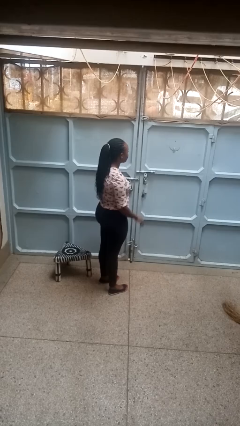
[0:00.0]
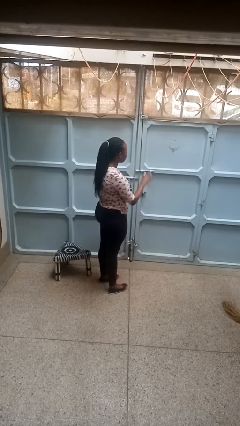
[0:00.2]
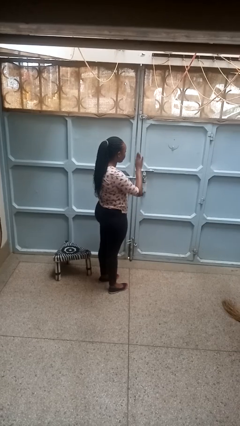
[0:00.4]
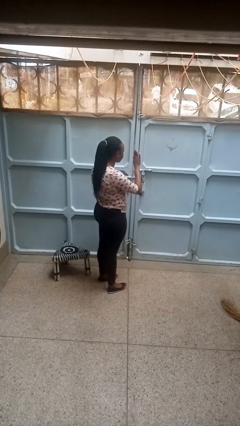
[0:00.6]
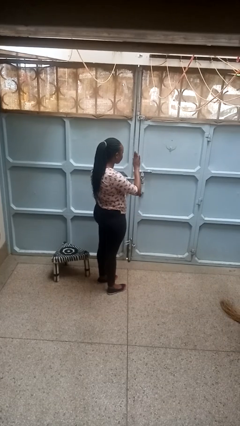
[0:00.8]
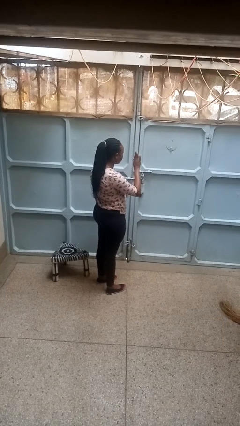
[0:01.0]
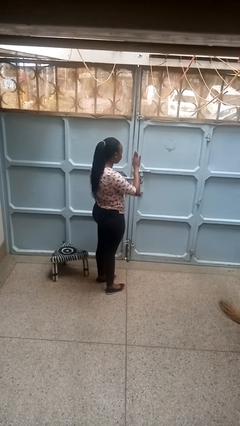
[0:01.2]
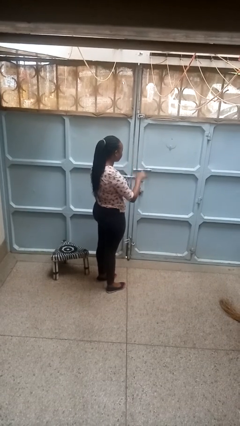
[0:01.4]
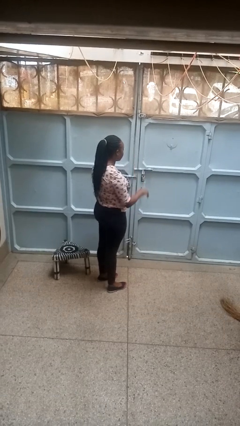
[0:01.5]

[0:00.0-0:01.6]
person gestures stop

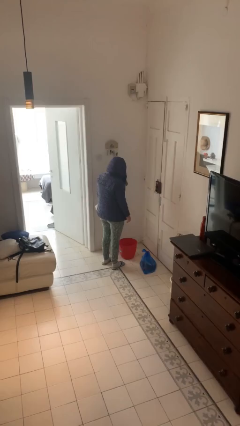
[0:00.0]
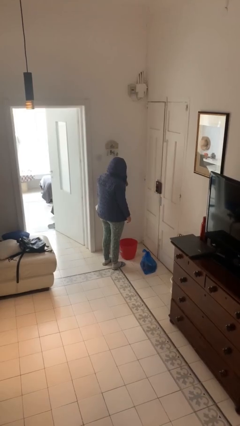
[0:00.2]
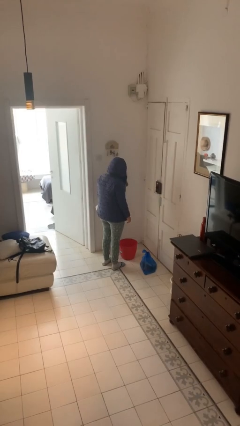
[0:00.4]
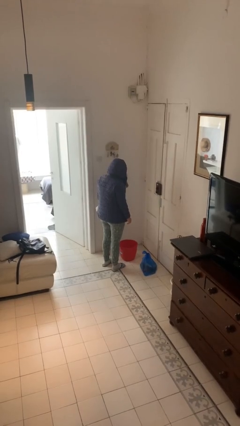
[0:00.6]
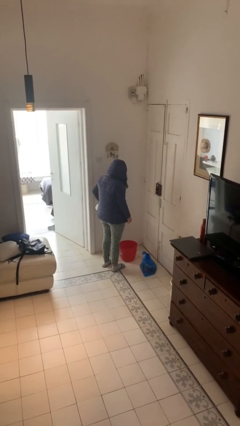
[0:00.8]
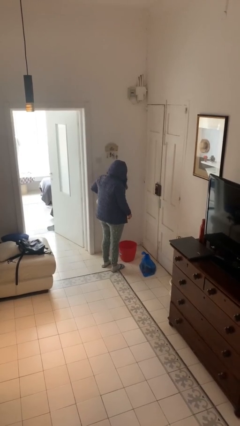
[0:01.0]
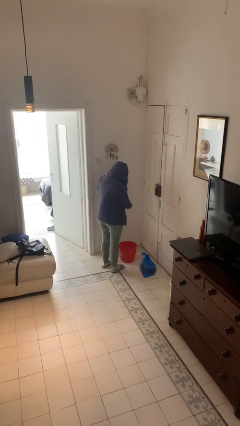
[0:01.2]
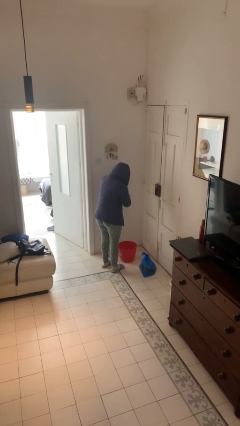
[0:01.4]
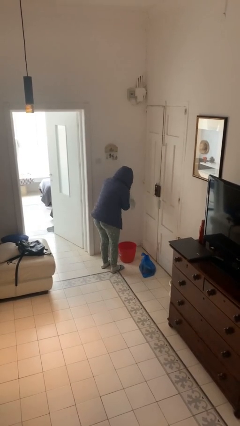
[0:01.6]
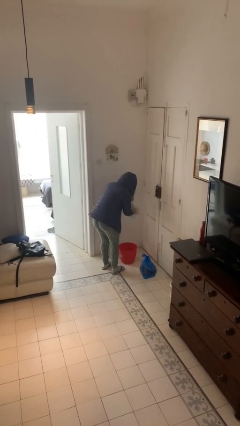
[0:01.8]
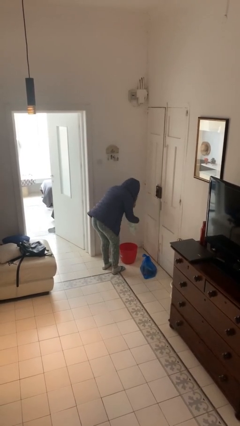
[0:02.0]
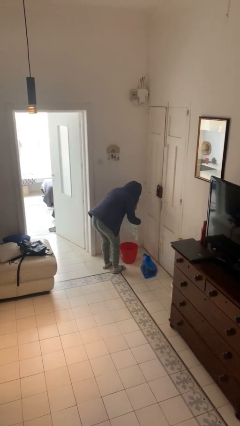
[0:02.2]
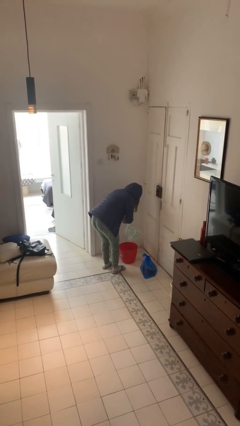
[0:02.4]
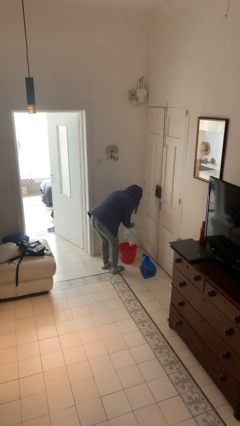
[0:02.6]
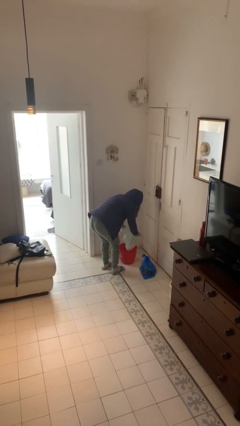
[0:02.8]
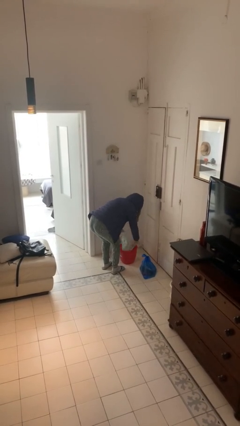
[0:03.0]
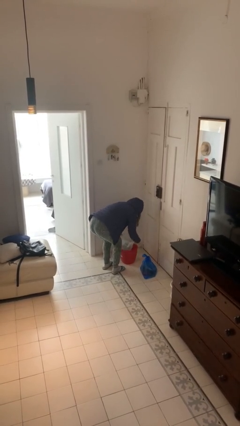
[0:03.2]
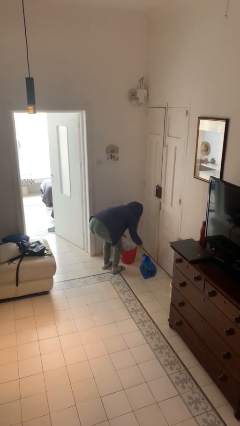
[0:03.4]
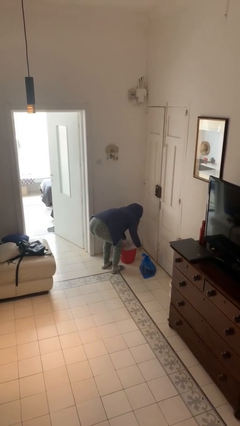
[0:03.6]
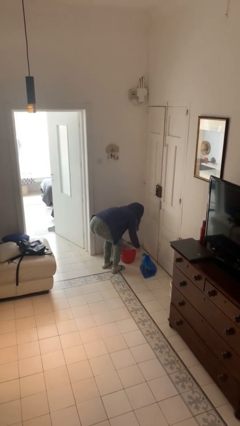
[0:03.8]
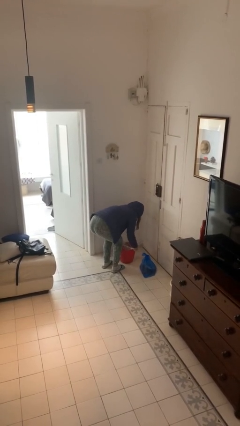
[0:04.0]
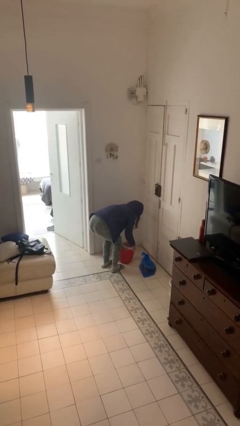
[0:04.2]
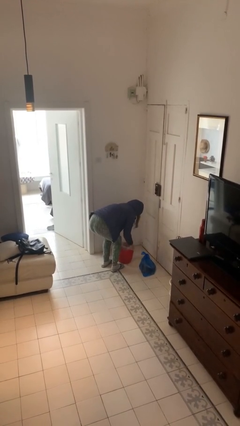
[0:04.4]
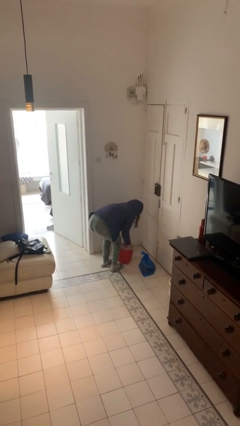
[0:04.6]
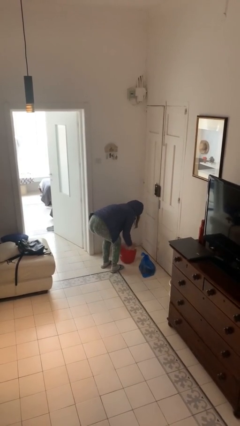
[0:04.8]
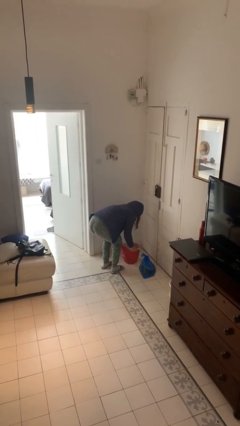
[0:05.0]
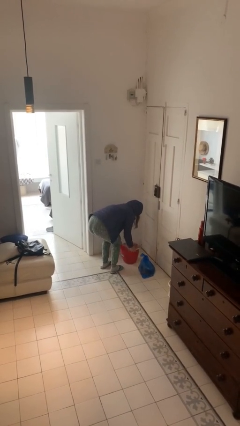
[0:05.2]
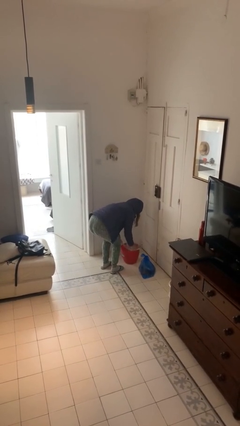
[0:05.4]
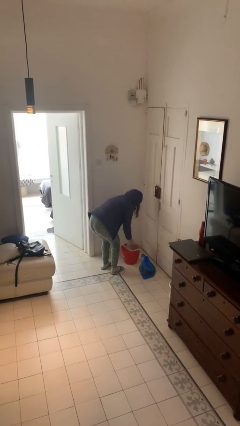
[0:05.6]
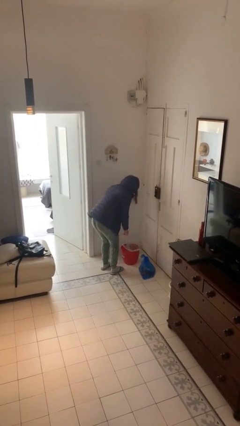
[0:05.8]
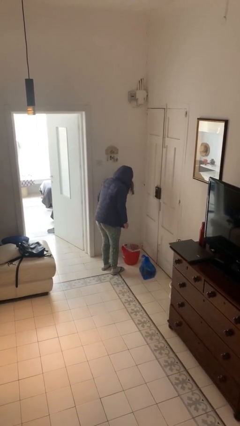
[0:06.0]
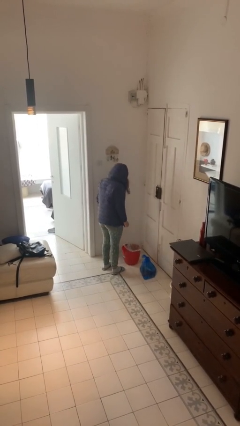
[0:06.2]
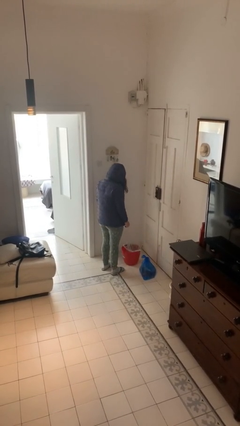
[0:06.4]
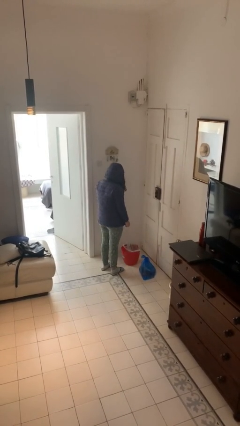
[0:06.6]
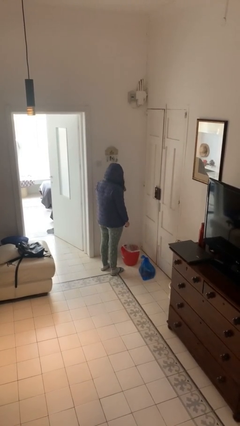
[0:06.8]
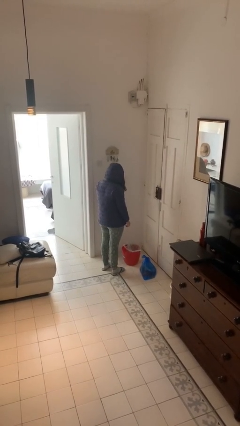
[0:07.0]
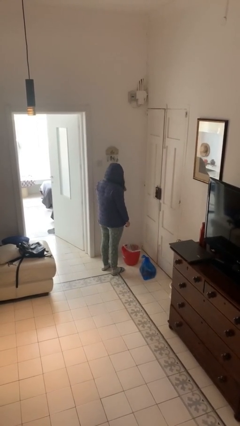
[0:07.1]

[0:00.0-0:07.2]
person inserts trashbag into trashcan

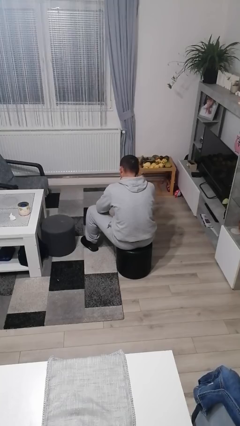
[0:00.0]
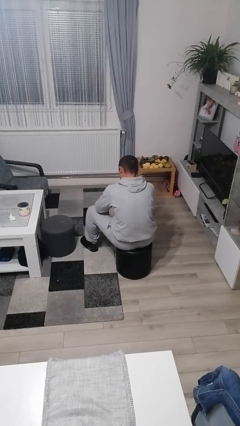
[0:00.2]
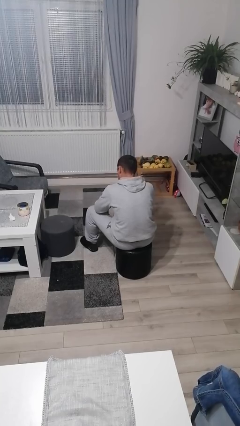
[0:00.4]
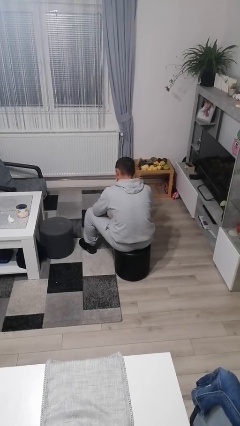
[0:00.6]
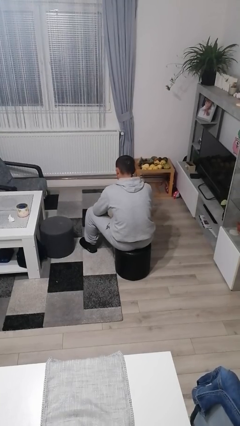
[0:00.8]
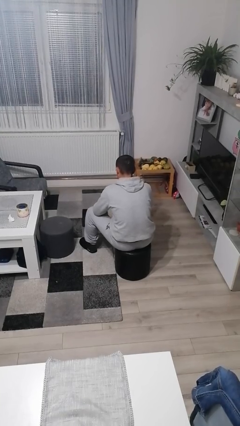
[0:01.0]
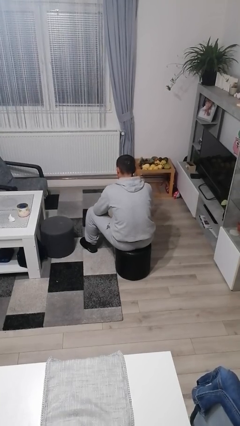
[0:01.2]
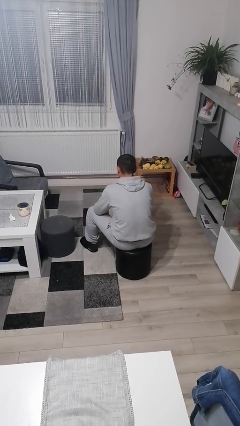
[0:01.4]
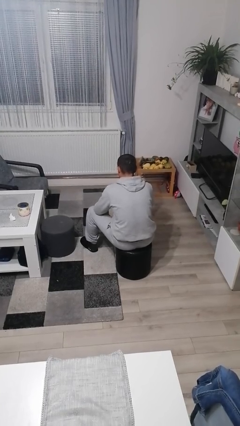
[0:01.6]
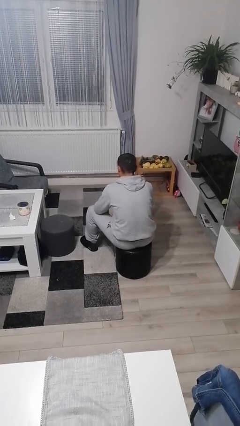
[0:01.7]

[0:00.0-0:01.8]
person gestures behind me

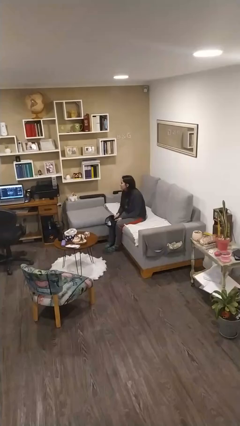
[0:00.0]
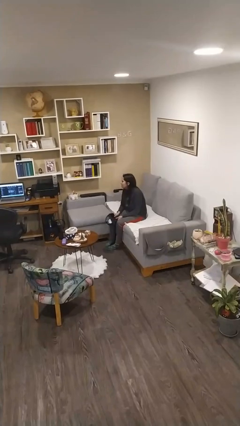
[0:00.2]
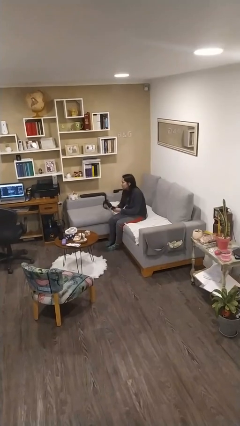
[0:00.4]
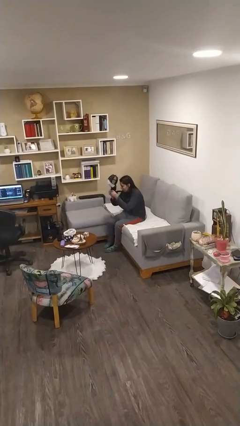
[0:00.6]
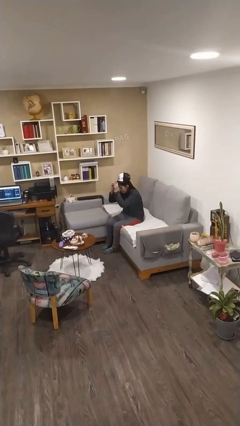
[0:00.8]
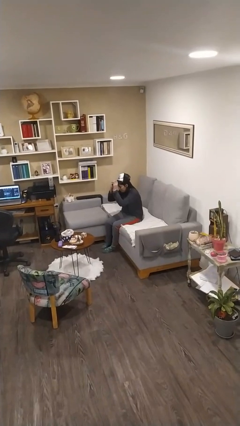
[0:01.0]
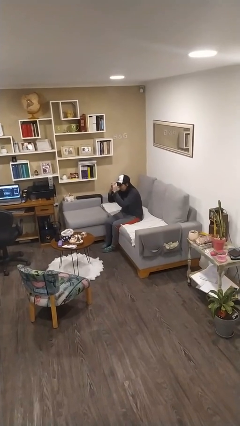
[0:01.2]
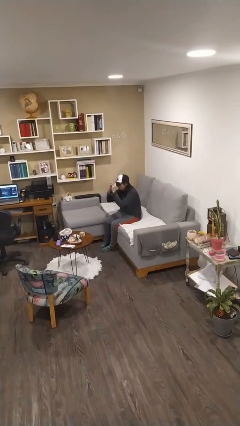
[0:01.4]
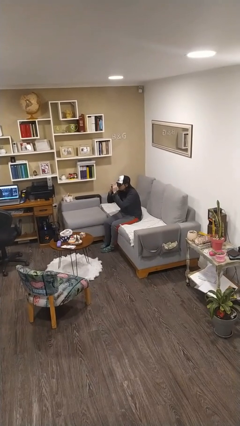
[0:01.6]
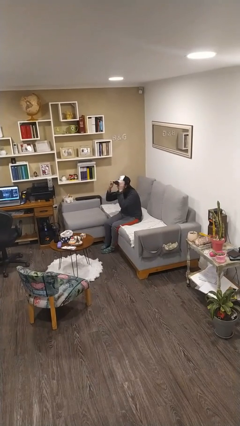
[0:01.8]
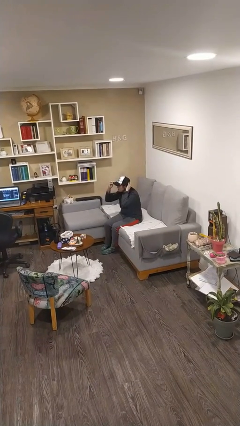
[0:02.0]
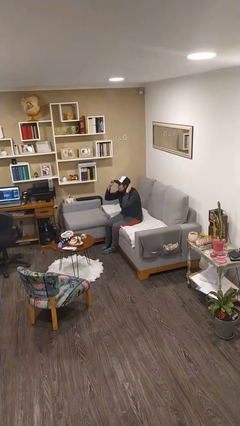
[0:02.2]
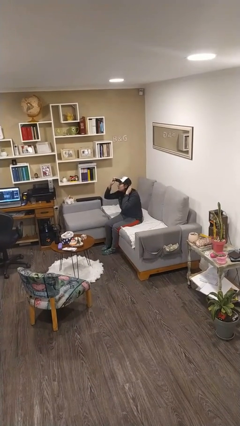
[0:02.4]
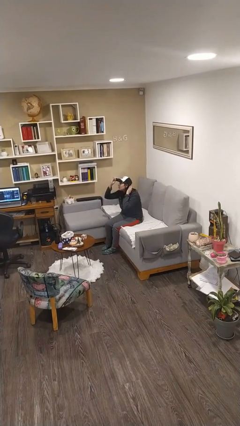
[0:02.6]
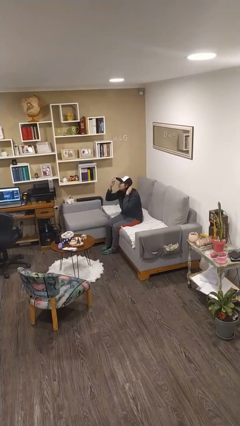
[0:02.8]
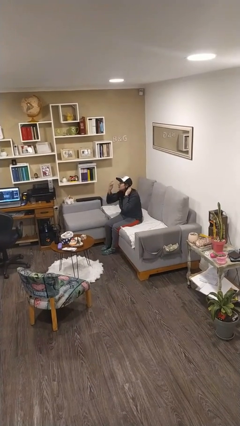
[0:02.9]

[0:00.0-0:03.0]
person puts on hat

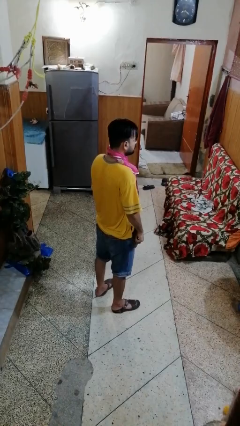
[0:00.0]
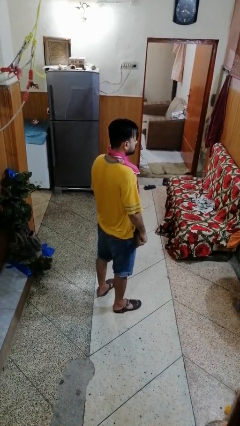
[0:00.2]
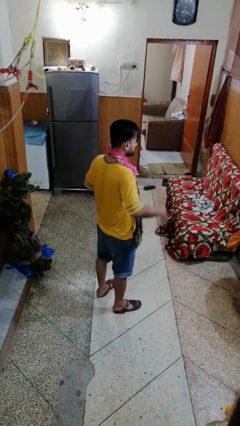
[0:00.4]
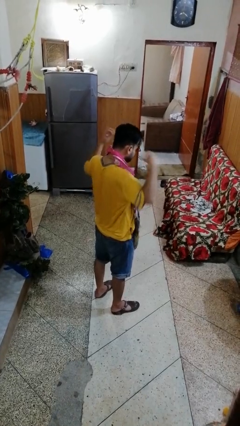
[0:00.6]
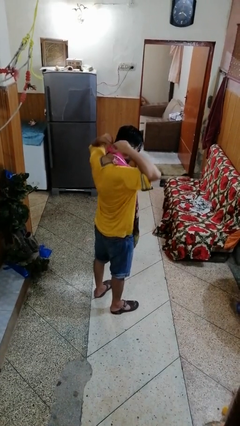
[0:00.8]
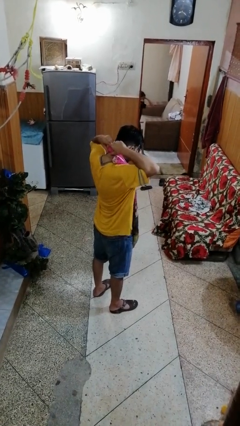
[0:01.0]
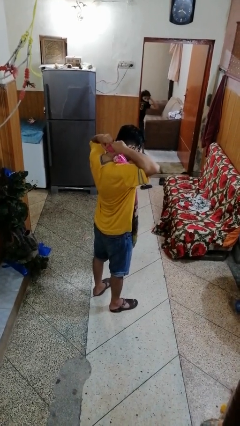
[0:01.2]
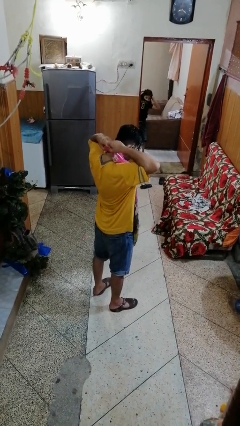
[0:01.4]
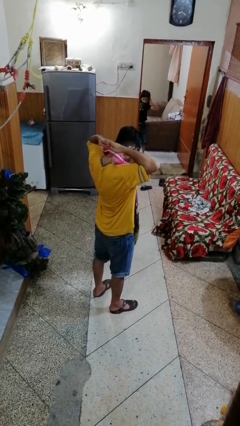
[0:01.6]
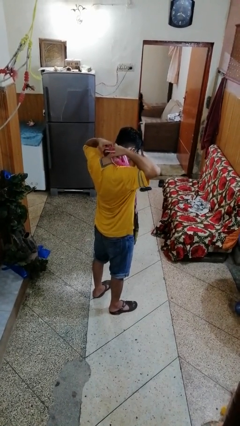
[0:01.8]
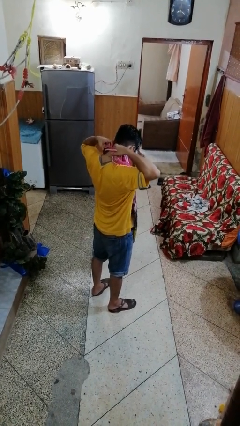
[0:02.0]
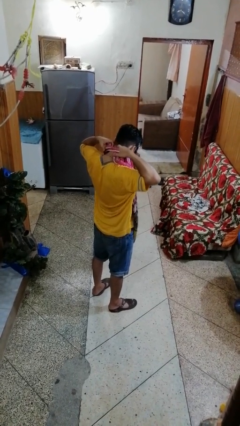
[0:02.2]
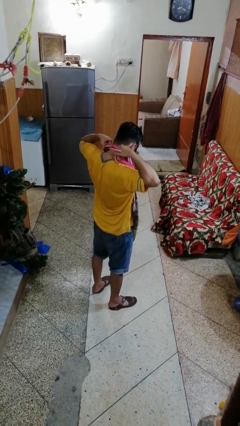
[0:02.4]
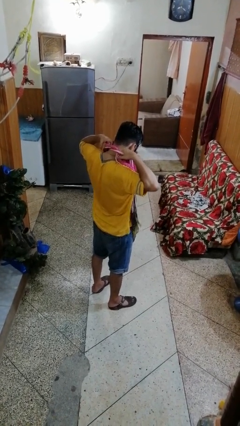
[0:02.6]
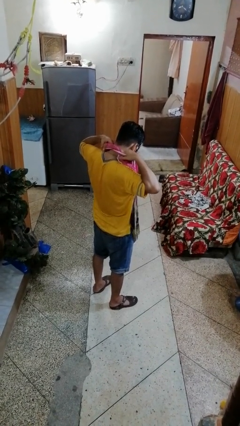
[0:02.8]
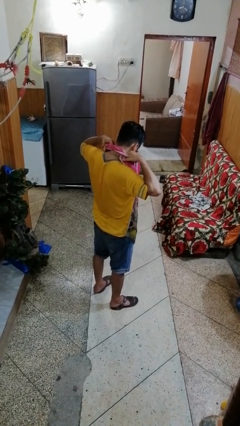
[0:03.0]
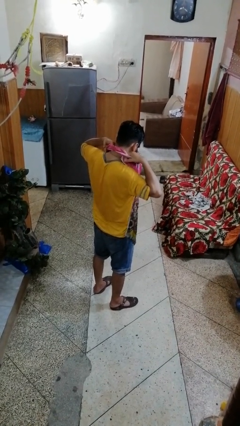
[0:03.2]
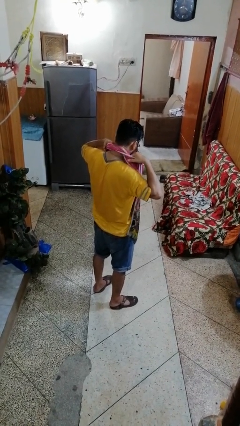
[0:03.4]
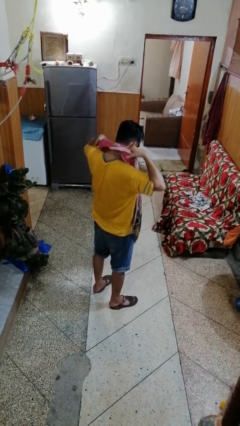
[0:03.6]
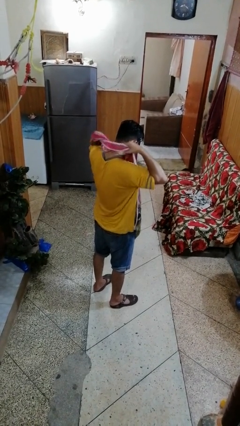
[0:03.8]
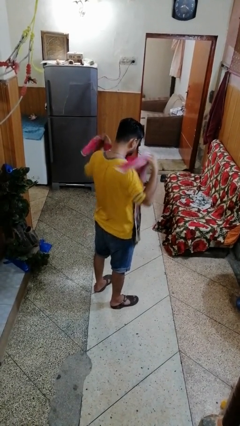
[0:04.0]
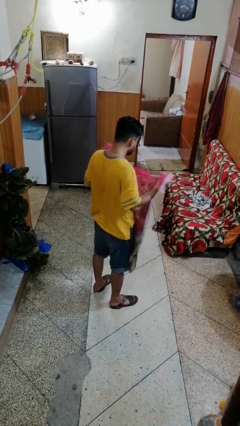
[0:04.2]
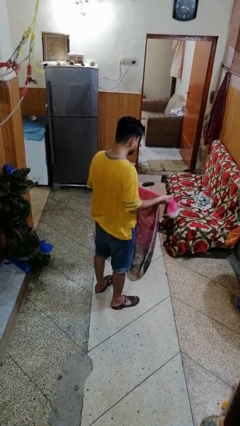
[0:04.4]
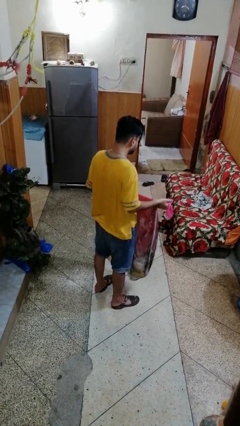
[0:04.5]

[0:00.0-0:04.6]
person takes off apron
